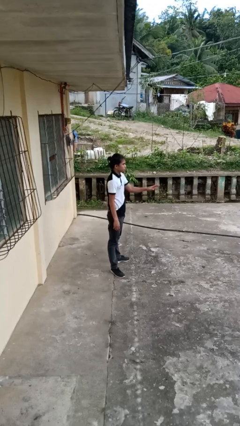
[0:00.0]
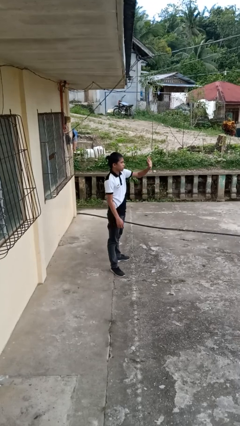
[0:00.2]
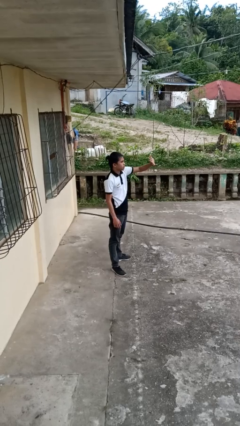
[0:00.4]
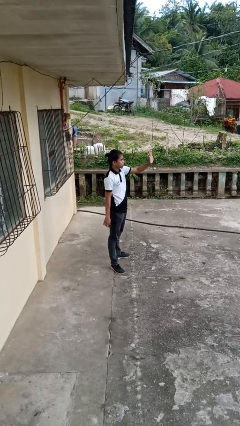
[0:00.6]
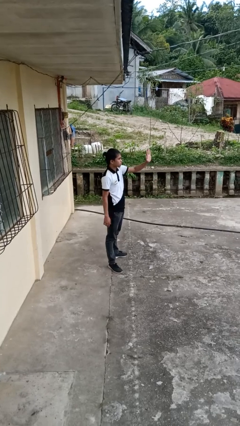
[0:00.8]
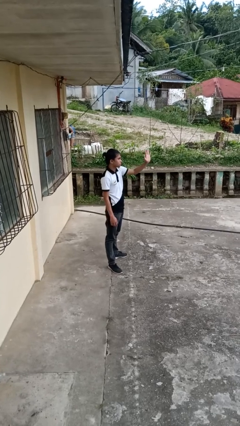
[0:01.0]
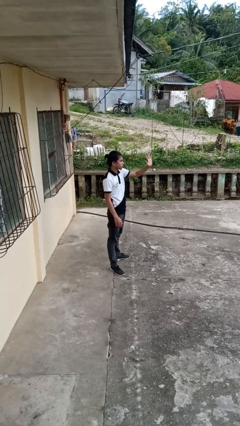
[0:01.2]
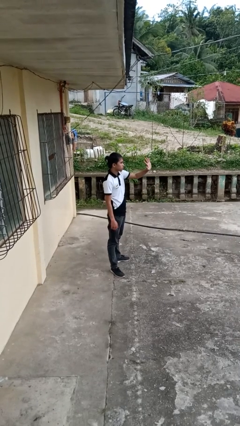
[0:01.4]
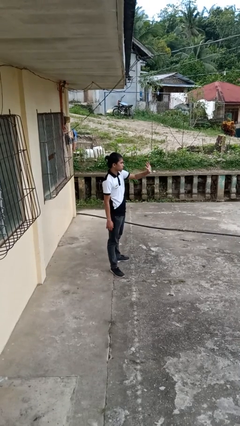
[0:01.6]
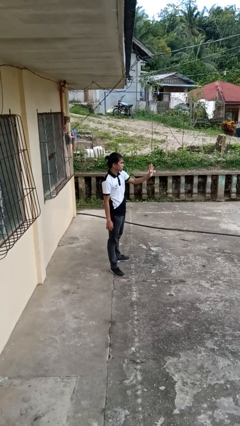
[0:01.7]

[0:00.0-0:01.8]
person waves at person

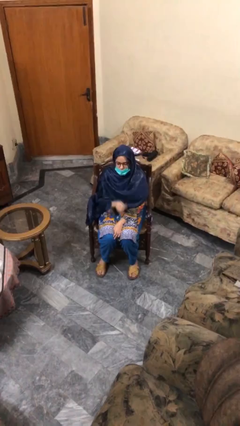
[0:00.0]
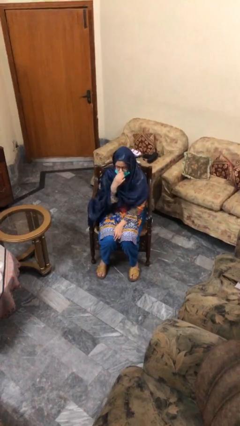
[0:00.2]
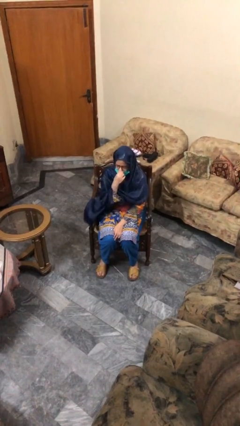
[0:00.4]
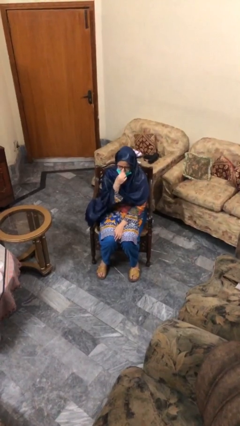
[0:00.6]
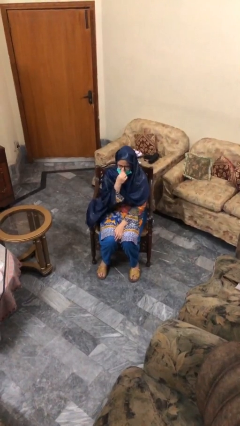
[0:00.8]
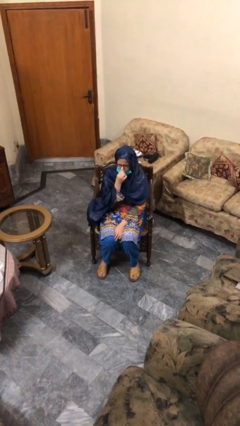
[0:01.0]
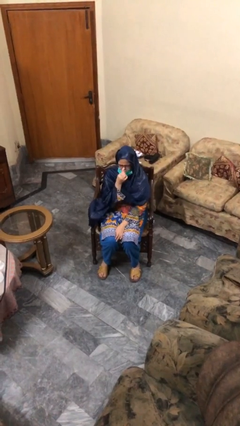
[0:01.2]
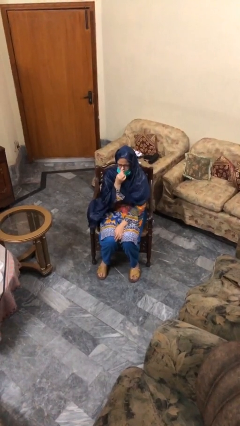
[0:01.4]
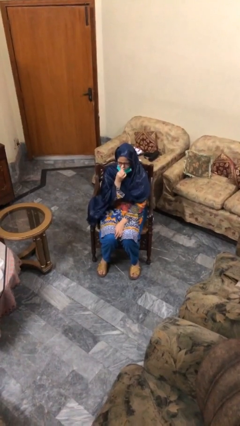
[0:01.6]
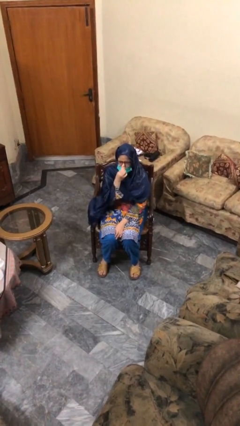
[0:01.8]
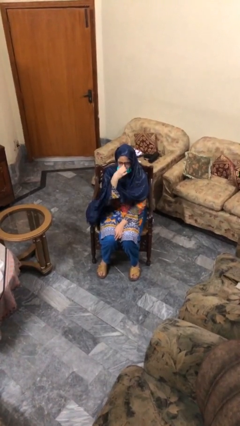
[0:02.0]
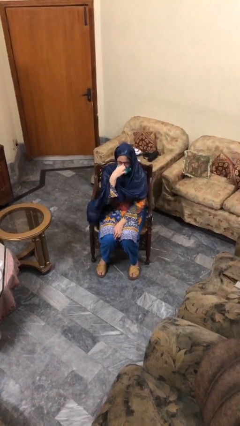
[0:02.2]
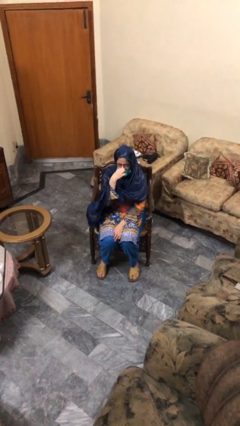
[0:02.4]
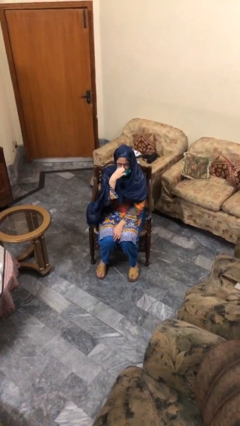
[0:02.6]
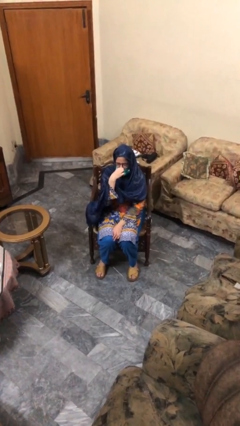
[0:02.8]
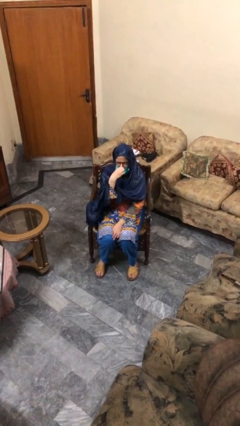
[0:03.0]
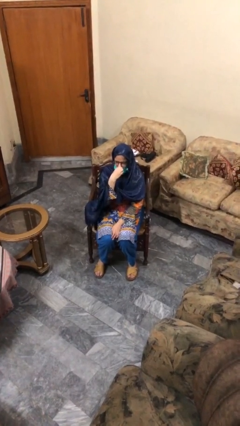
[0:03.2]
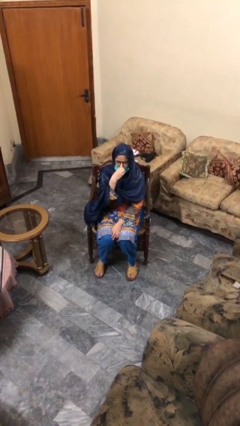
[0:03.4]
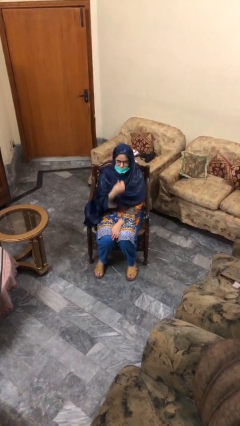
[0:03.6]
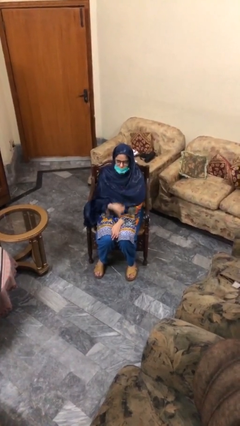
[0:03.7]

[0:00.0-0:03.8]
person blows nose

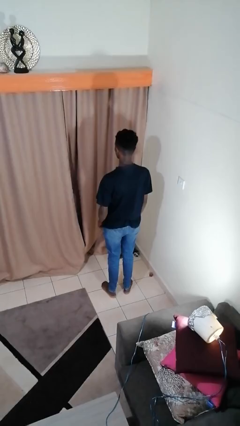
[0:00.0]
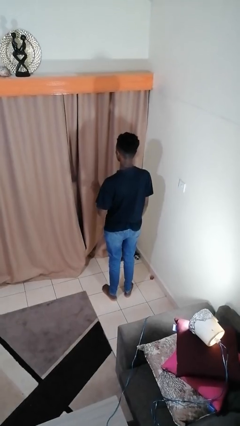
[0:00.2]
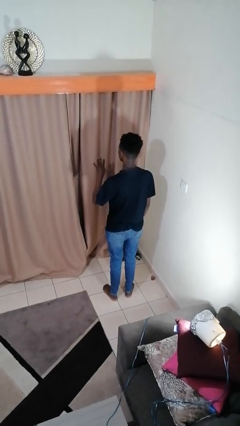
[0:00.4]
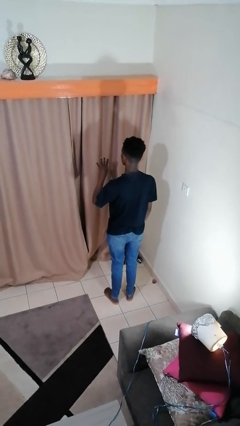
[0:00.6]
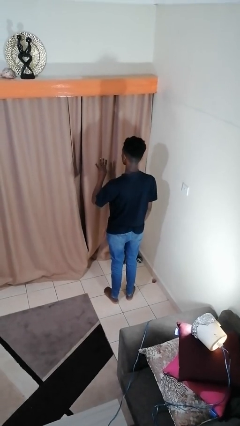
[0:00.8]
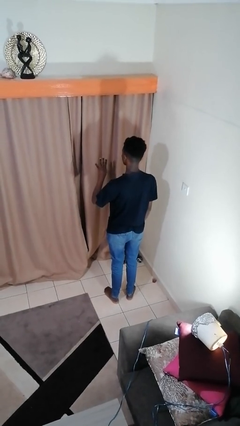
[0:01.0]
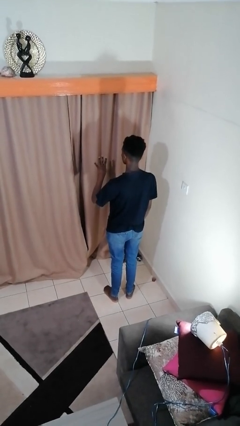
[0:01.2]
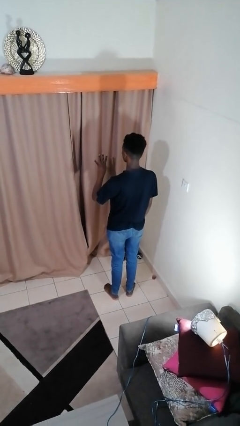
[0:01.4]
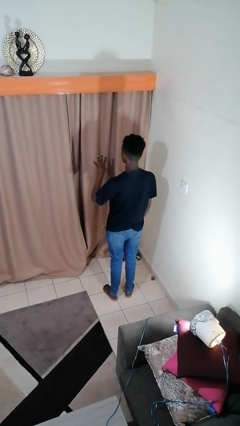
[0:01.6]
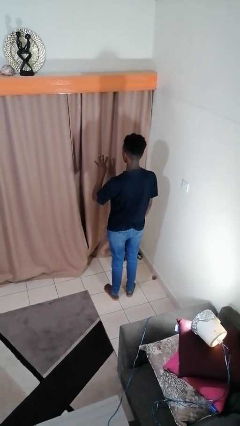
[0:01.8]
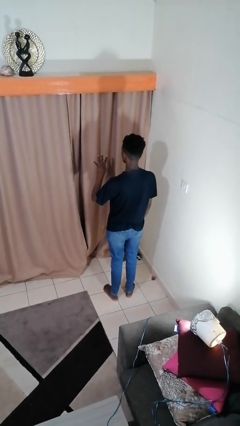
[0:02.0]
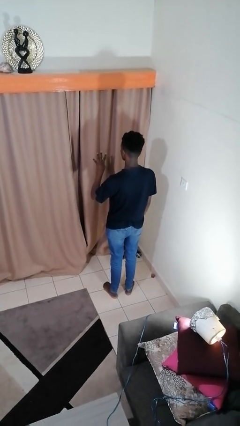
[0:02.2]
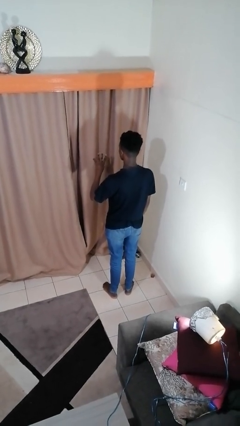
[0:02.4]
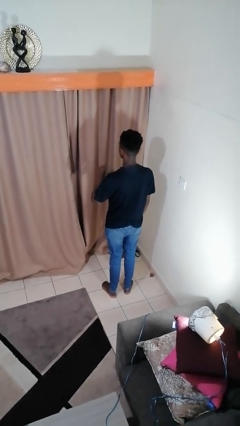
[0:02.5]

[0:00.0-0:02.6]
person gestures number four

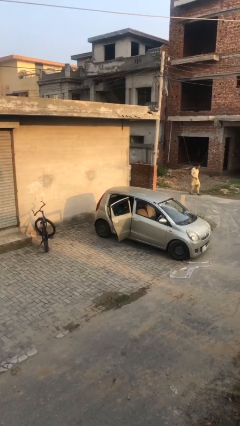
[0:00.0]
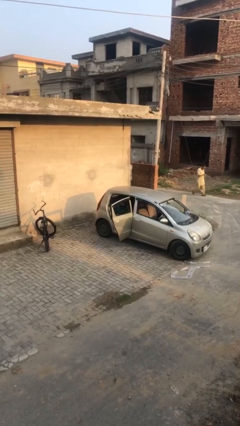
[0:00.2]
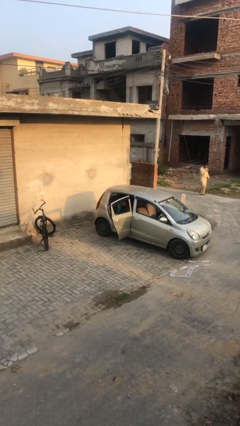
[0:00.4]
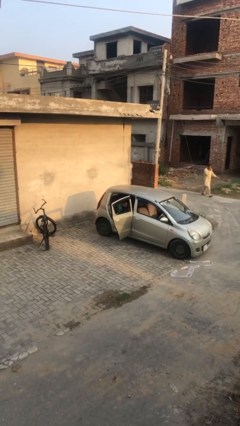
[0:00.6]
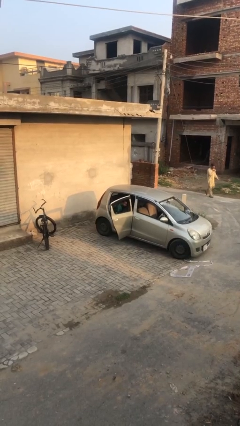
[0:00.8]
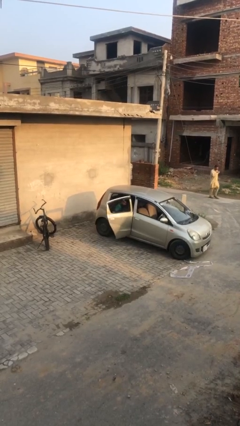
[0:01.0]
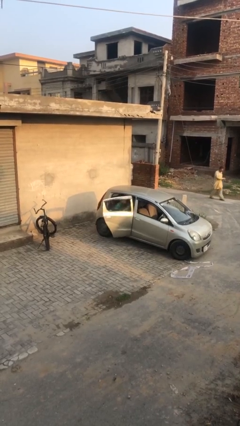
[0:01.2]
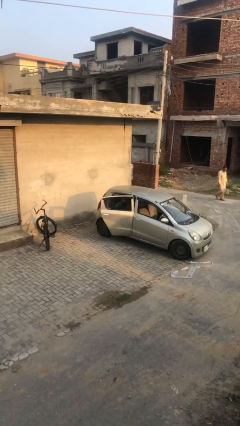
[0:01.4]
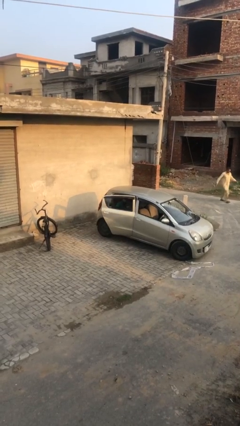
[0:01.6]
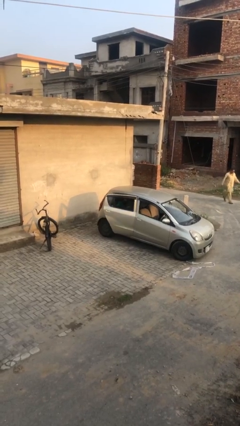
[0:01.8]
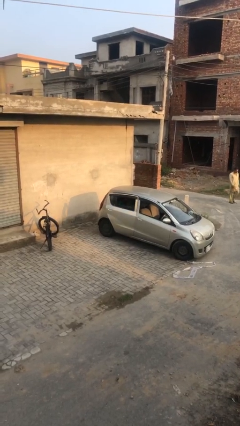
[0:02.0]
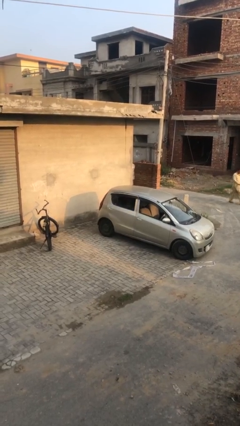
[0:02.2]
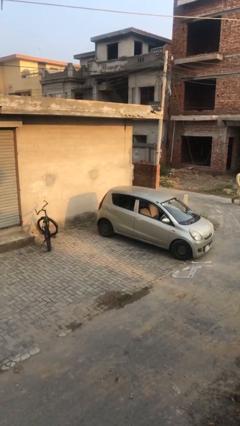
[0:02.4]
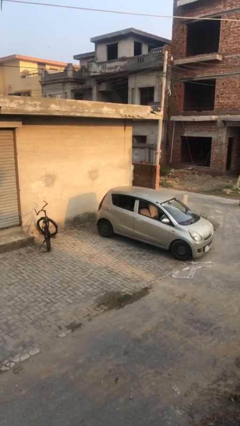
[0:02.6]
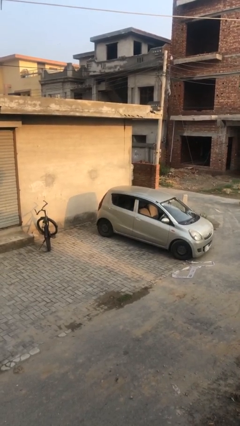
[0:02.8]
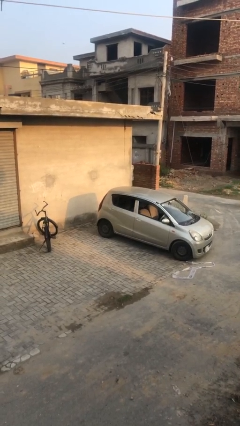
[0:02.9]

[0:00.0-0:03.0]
person closes car door

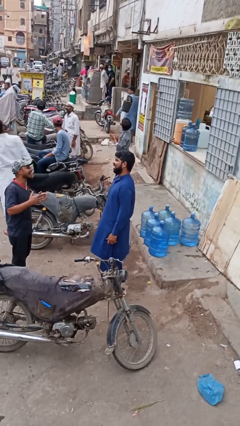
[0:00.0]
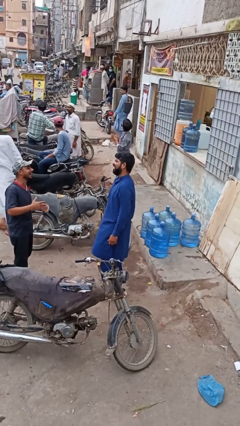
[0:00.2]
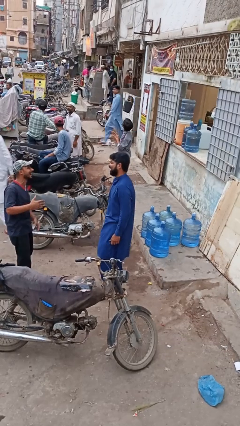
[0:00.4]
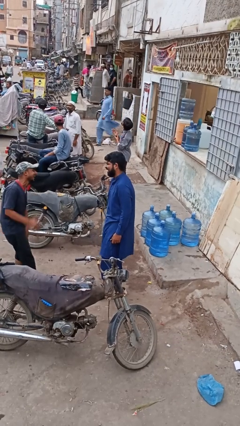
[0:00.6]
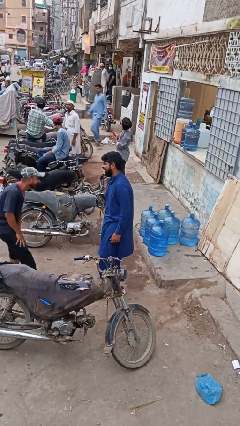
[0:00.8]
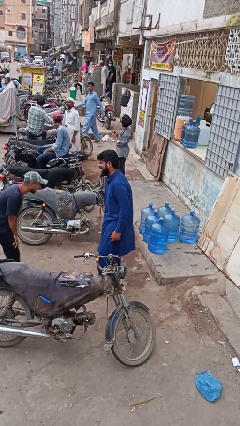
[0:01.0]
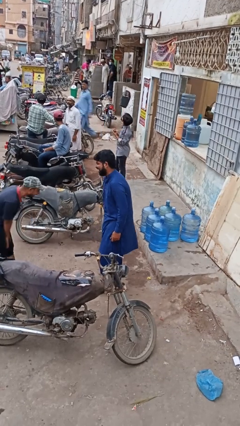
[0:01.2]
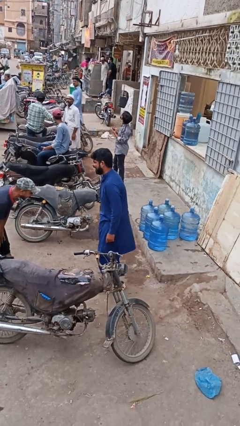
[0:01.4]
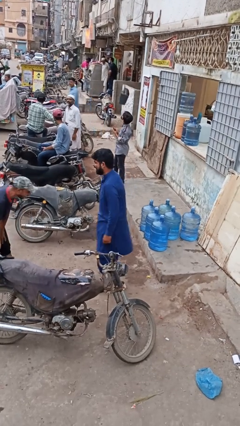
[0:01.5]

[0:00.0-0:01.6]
person laughs with person

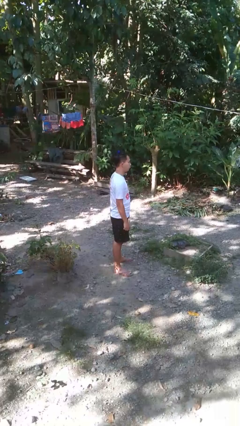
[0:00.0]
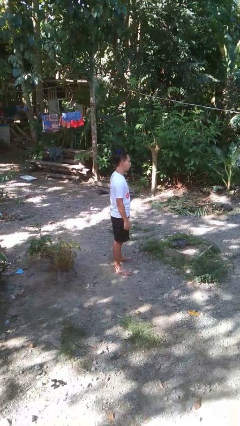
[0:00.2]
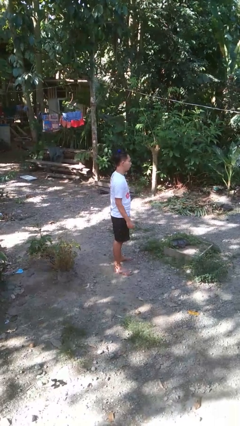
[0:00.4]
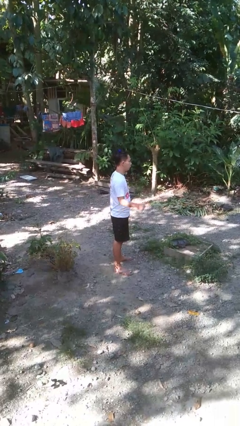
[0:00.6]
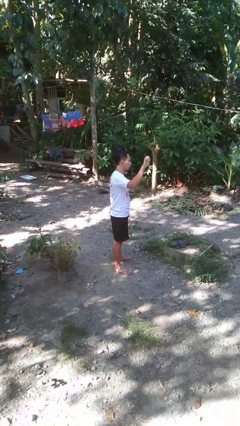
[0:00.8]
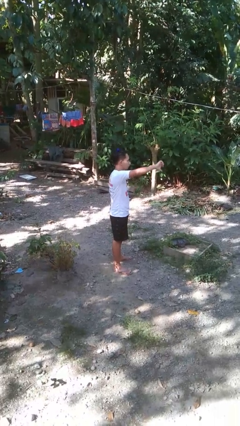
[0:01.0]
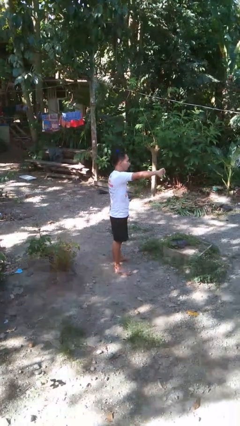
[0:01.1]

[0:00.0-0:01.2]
person gestures thumbs down

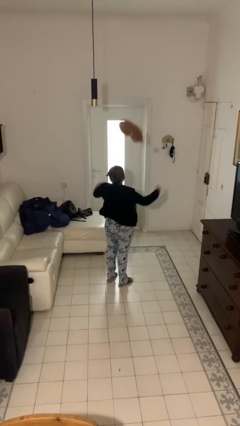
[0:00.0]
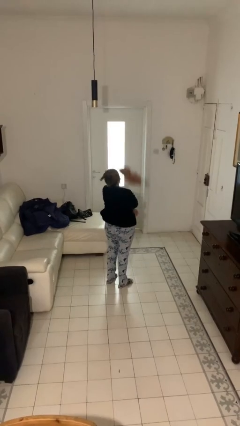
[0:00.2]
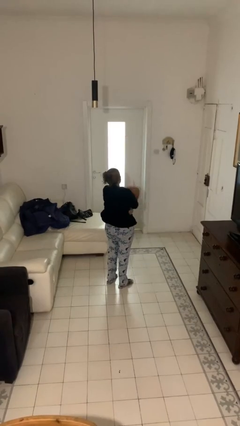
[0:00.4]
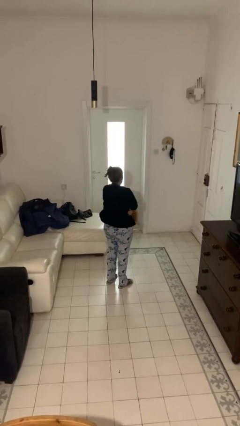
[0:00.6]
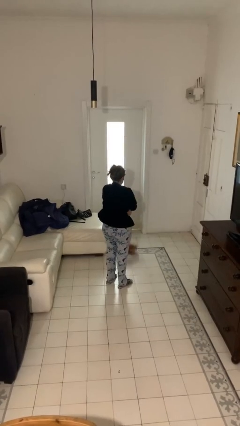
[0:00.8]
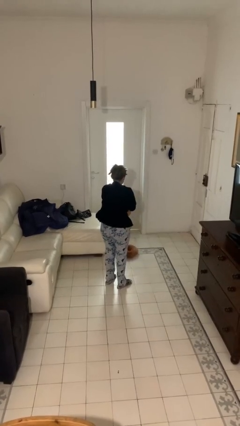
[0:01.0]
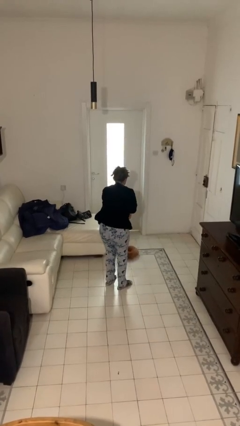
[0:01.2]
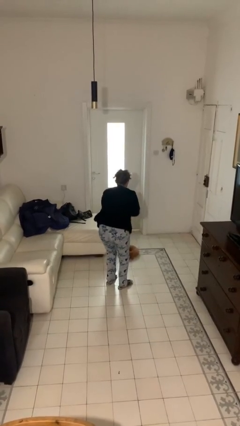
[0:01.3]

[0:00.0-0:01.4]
person catches dropped object

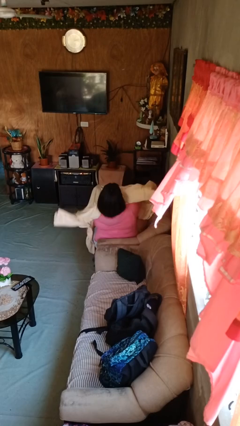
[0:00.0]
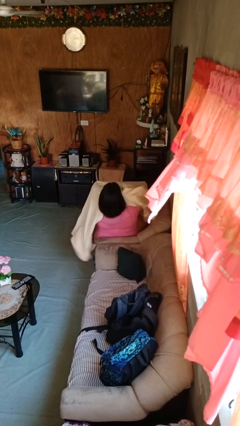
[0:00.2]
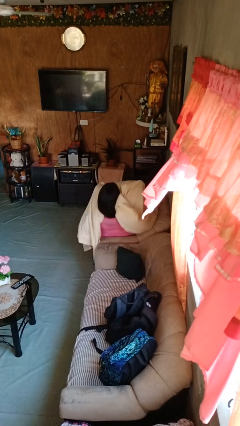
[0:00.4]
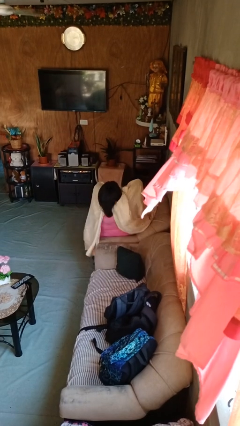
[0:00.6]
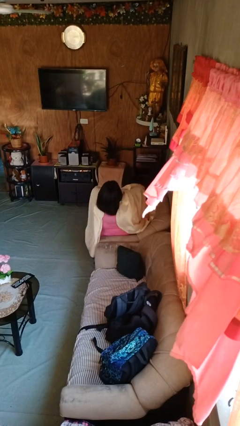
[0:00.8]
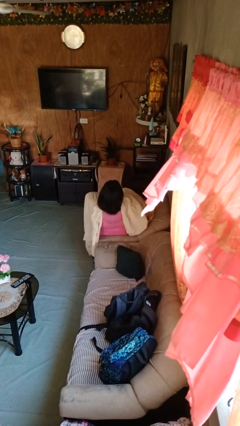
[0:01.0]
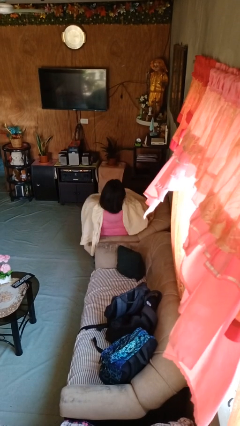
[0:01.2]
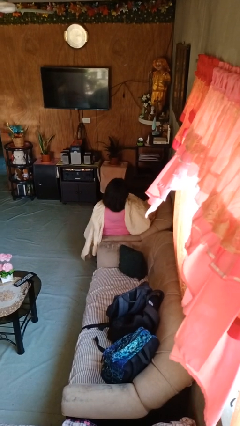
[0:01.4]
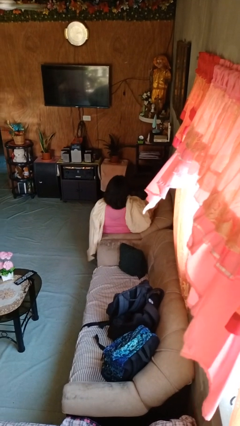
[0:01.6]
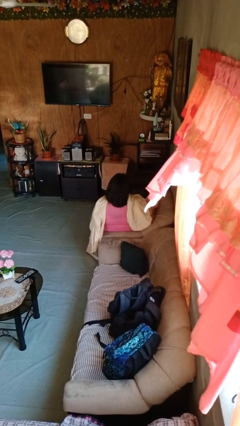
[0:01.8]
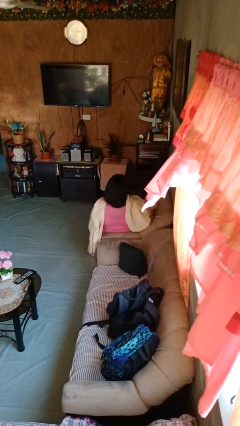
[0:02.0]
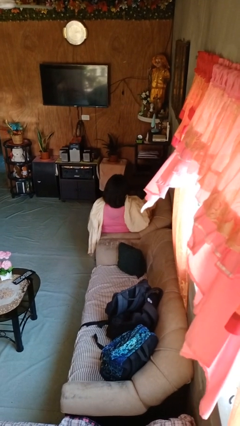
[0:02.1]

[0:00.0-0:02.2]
person covers with blanket
